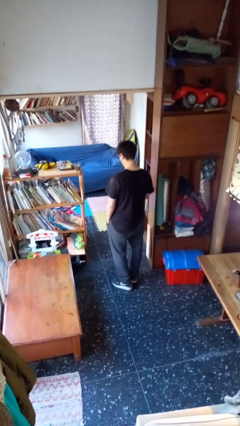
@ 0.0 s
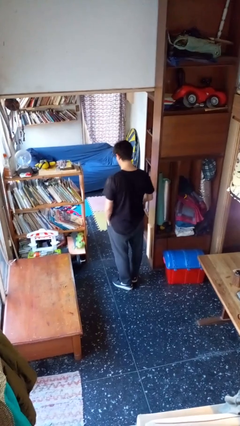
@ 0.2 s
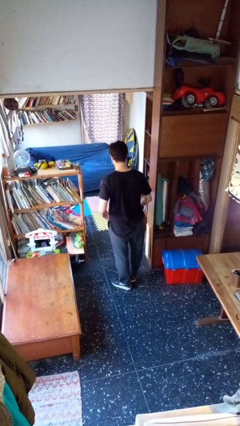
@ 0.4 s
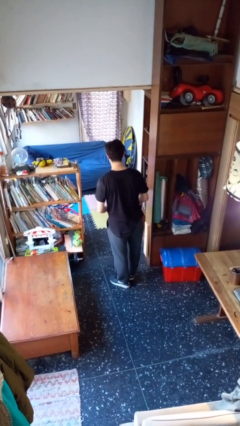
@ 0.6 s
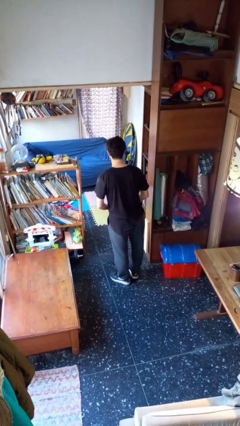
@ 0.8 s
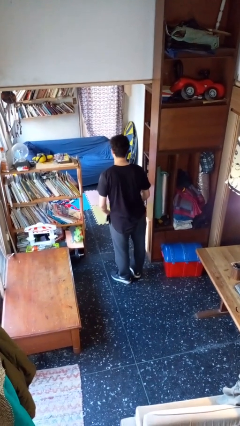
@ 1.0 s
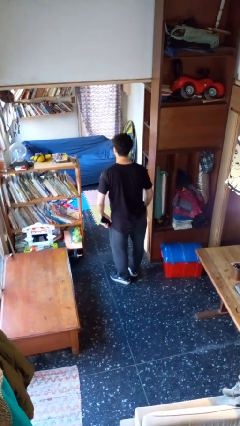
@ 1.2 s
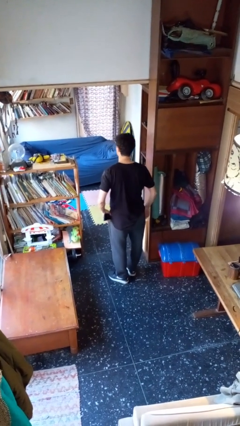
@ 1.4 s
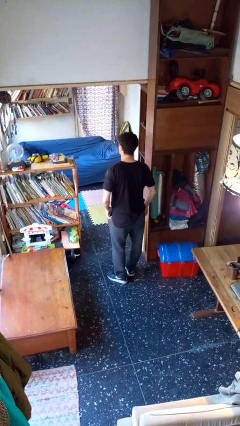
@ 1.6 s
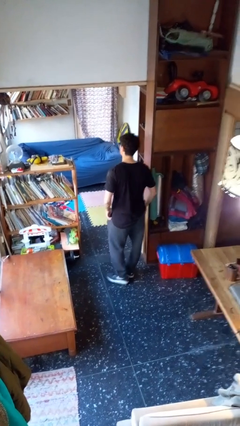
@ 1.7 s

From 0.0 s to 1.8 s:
person puts phone into pocket

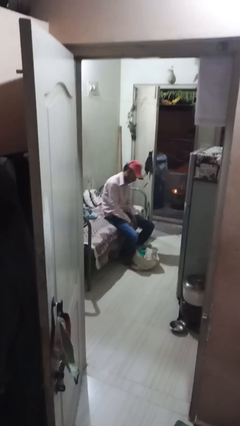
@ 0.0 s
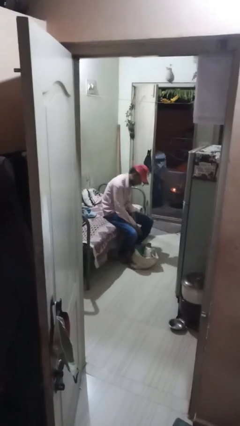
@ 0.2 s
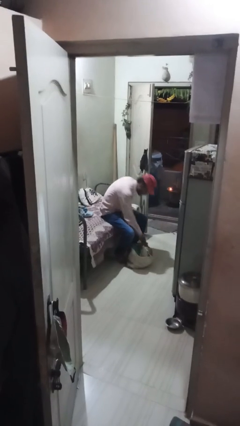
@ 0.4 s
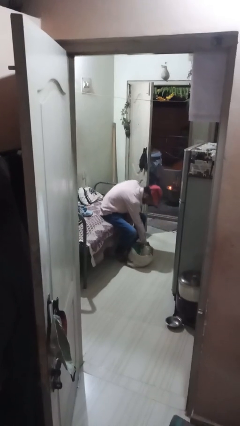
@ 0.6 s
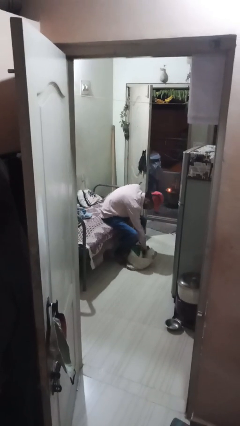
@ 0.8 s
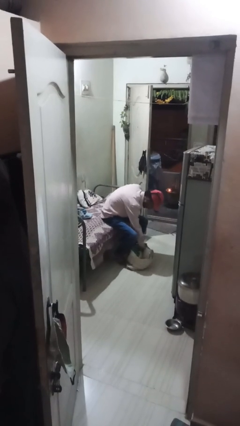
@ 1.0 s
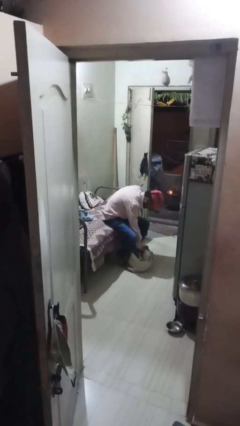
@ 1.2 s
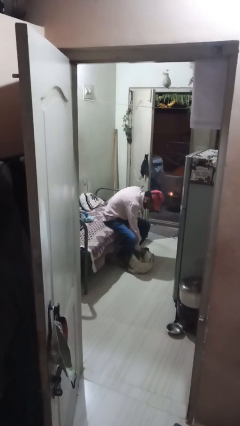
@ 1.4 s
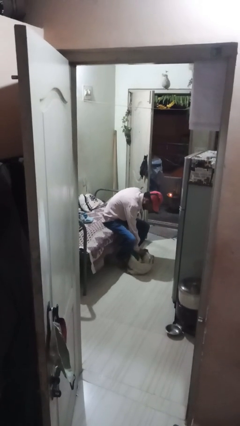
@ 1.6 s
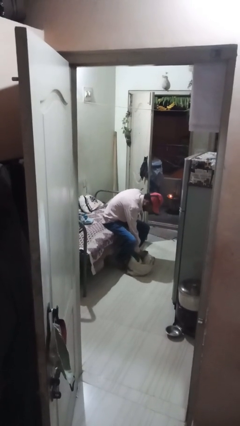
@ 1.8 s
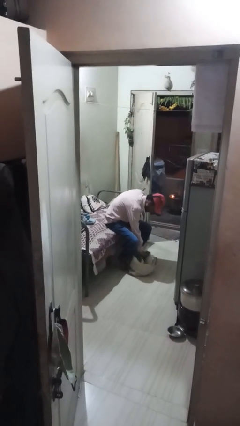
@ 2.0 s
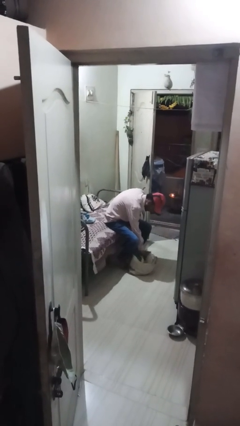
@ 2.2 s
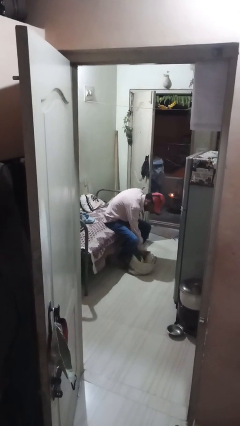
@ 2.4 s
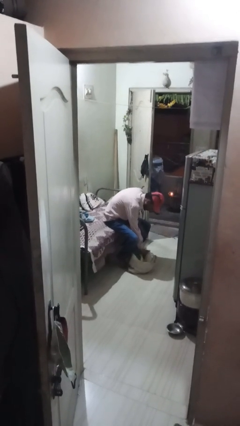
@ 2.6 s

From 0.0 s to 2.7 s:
person searches in bag

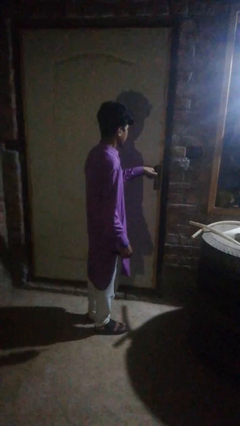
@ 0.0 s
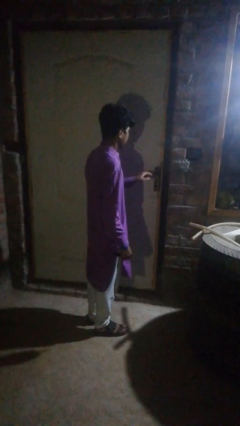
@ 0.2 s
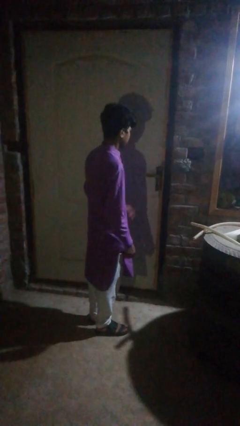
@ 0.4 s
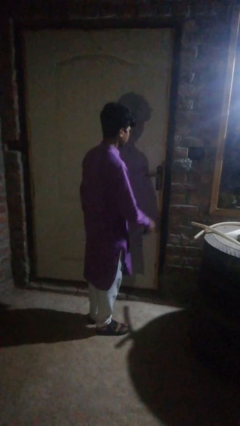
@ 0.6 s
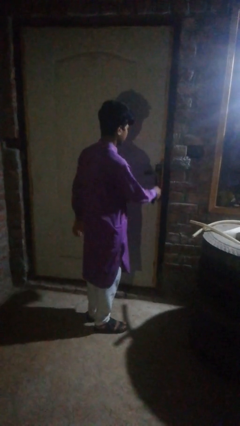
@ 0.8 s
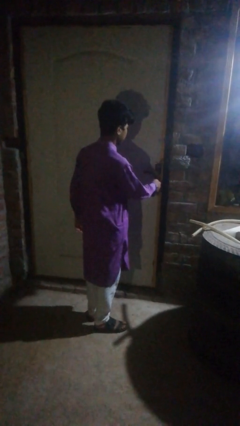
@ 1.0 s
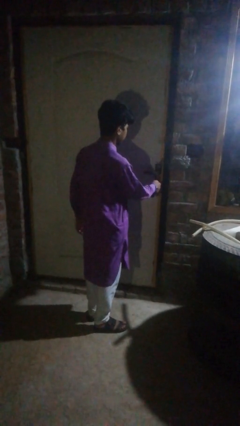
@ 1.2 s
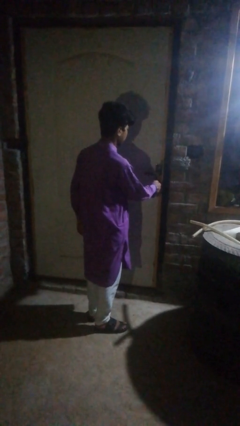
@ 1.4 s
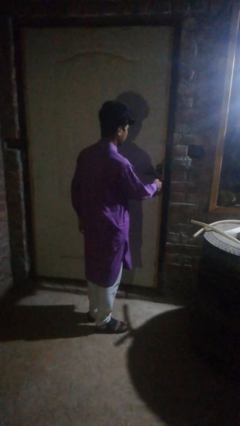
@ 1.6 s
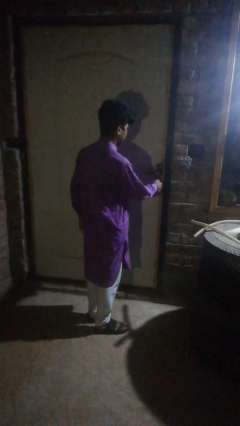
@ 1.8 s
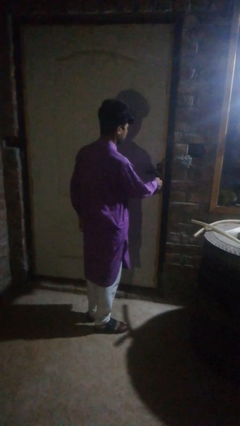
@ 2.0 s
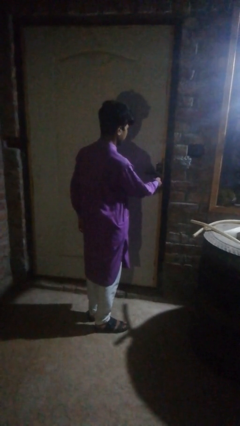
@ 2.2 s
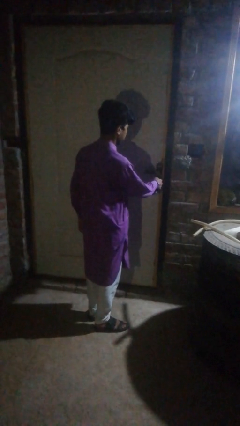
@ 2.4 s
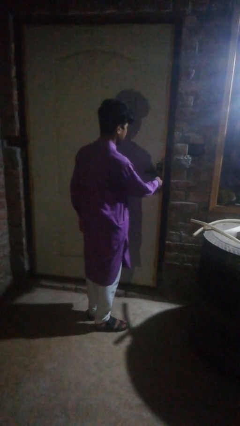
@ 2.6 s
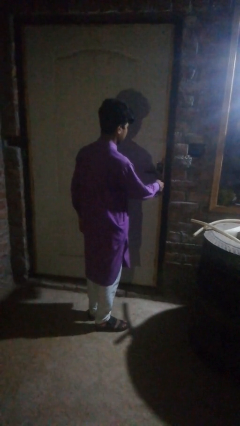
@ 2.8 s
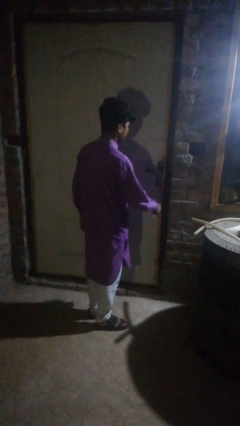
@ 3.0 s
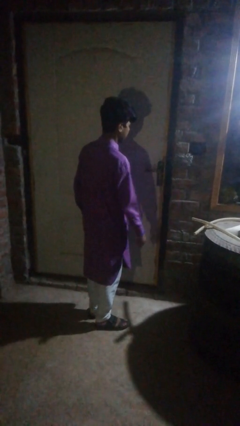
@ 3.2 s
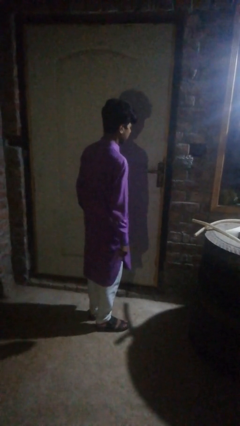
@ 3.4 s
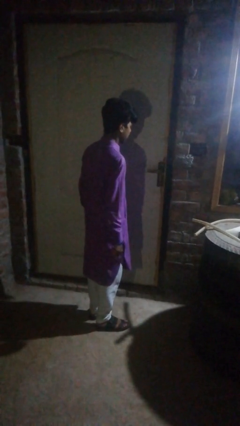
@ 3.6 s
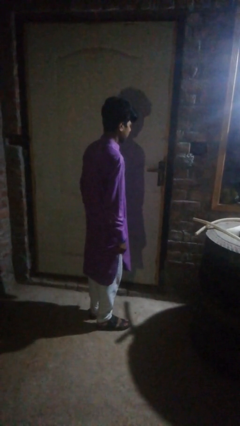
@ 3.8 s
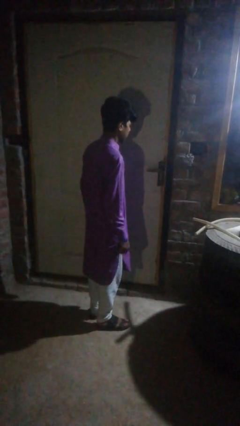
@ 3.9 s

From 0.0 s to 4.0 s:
person locks door with keys

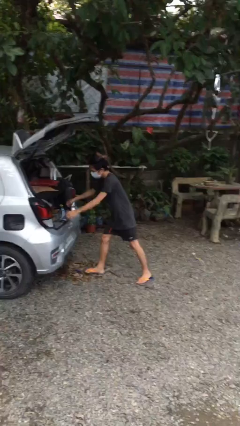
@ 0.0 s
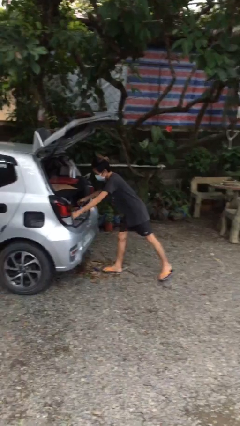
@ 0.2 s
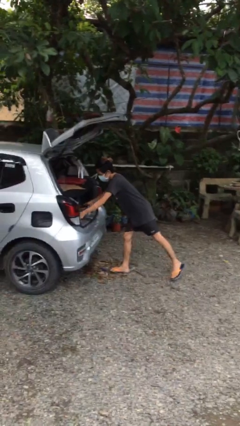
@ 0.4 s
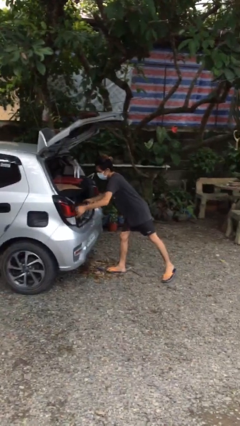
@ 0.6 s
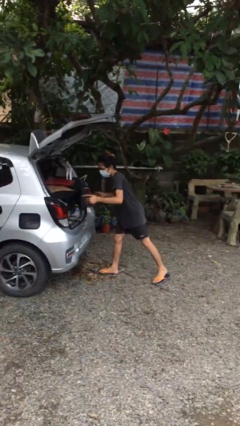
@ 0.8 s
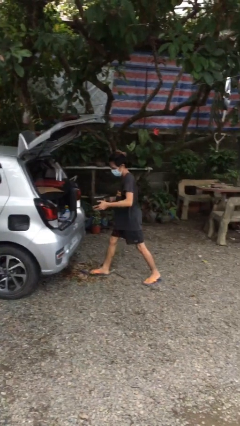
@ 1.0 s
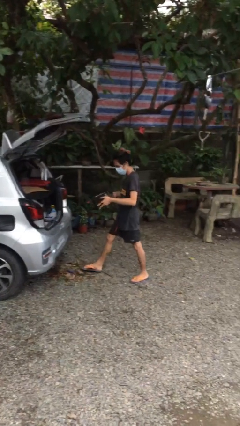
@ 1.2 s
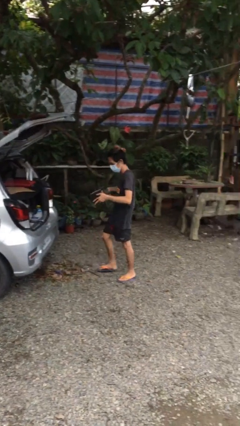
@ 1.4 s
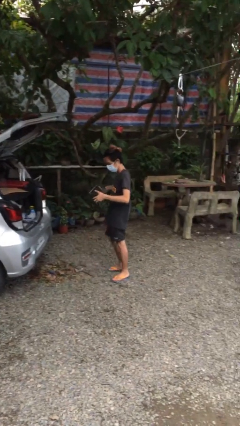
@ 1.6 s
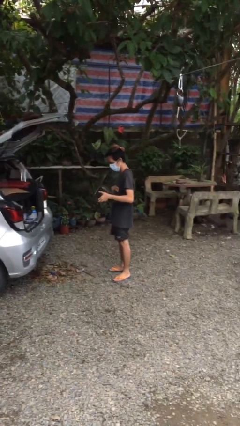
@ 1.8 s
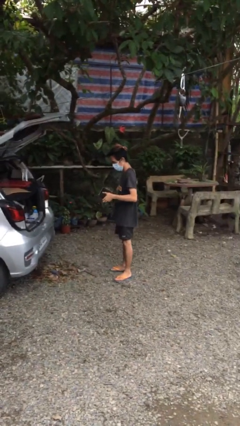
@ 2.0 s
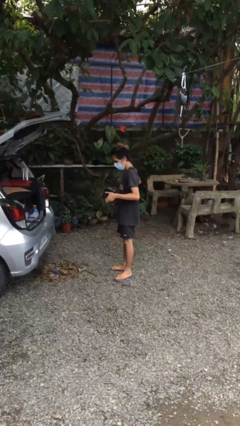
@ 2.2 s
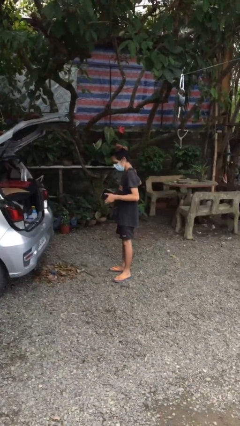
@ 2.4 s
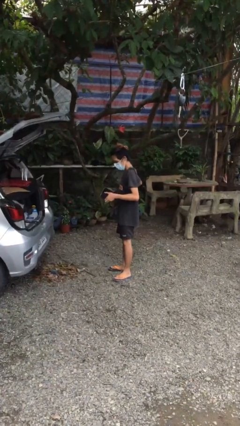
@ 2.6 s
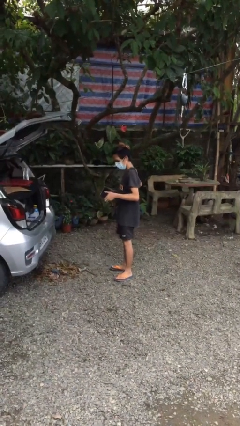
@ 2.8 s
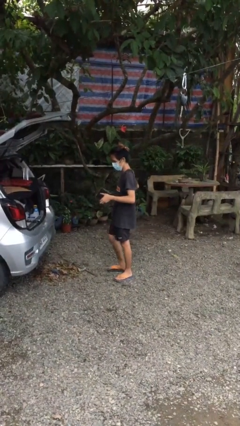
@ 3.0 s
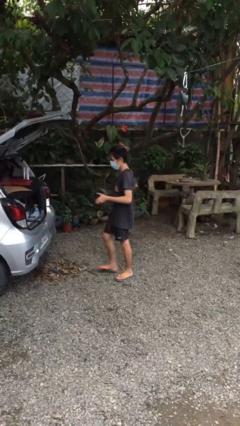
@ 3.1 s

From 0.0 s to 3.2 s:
person unloads car

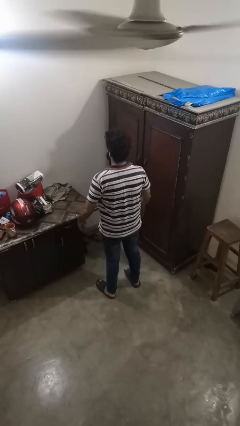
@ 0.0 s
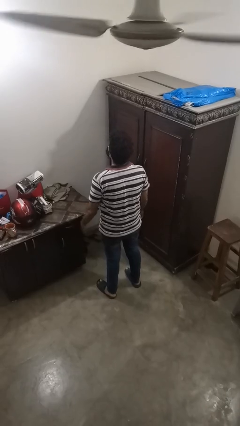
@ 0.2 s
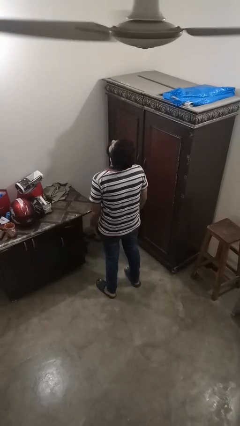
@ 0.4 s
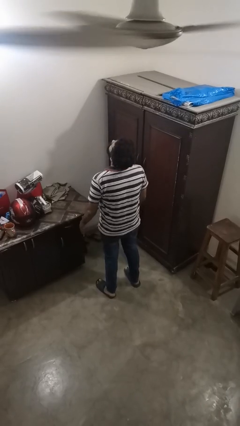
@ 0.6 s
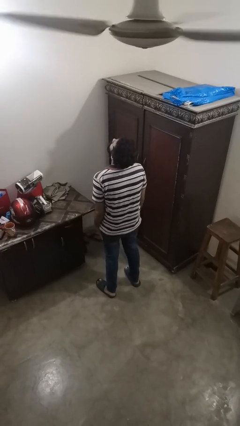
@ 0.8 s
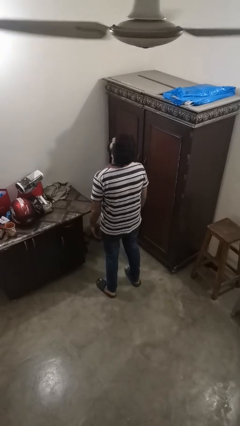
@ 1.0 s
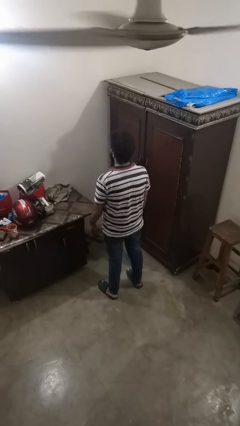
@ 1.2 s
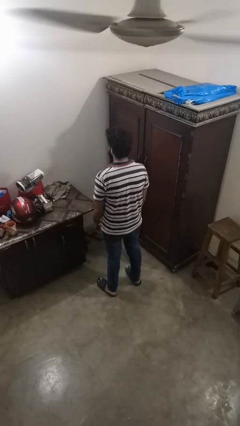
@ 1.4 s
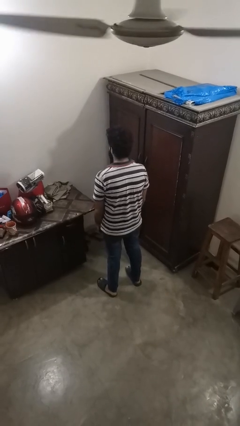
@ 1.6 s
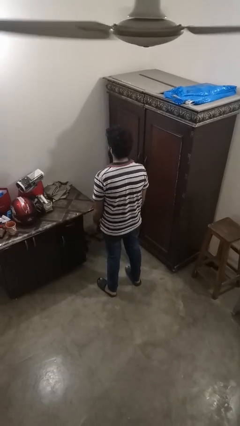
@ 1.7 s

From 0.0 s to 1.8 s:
person slaps hands on thighs

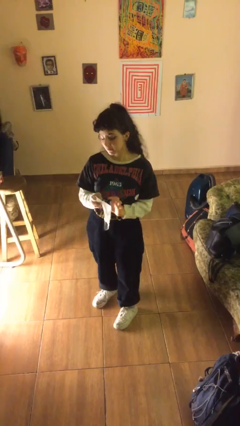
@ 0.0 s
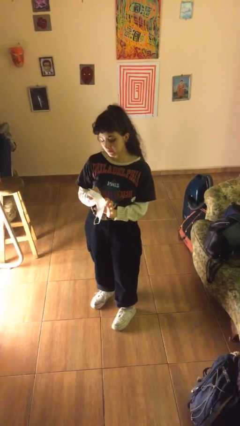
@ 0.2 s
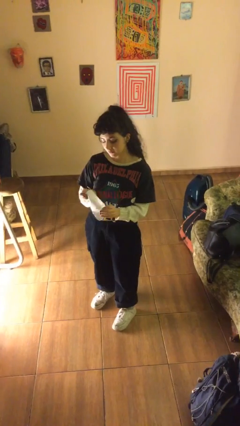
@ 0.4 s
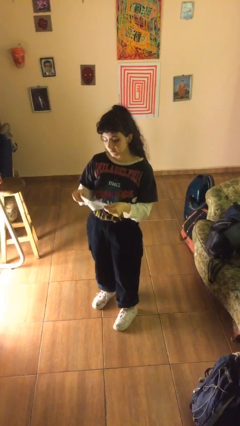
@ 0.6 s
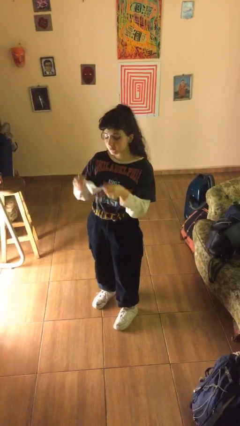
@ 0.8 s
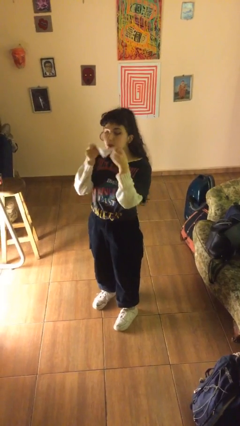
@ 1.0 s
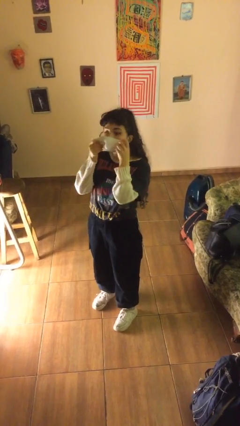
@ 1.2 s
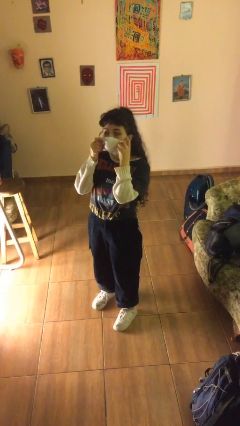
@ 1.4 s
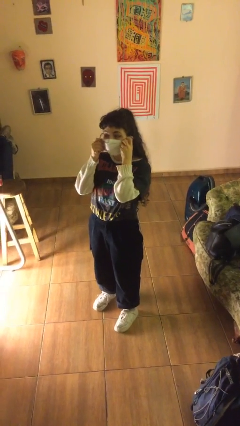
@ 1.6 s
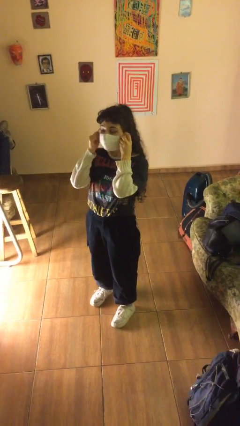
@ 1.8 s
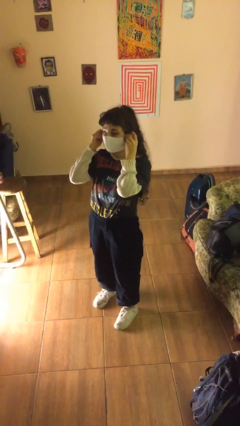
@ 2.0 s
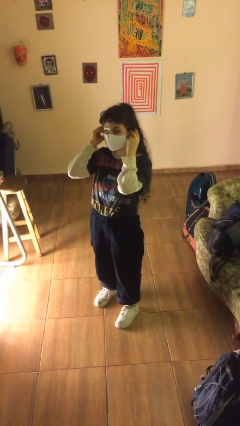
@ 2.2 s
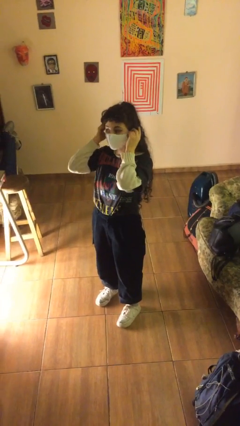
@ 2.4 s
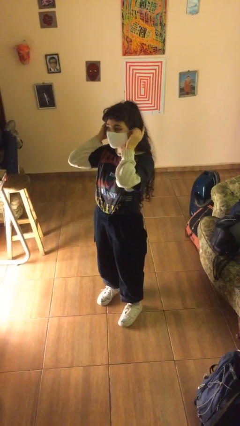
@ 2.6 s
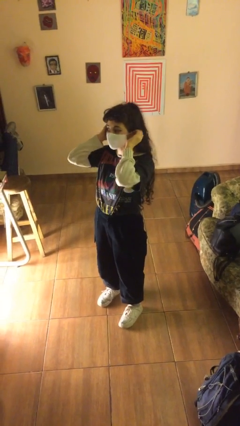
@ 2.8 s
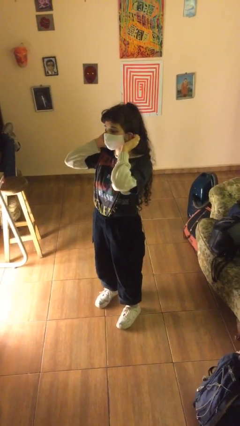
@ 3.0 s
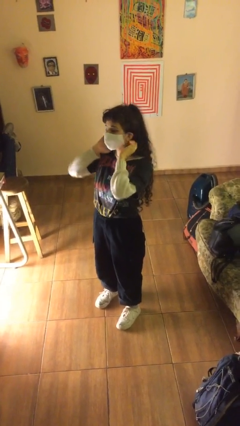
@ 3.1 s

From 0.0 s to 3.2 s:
person puts on facemask

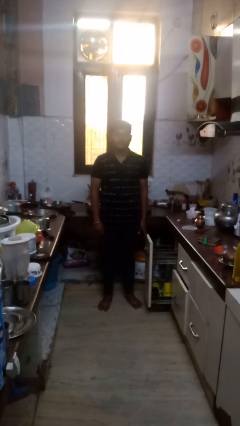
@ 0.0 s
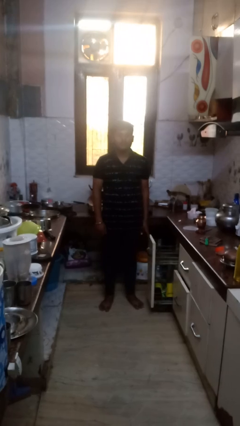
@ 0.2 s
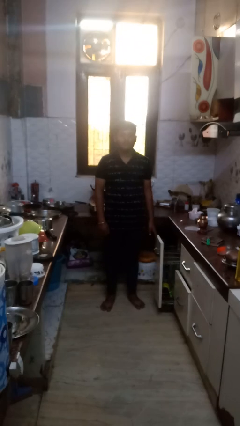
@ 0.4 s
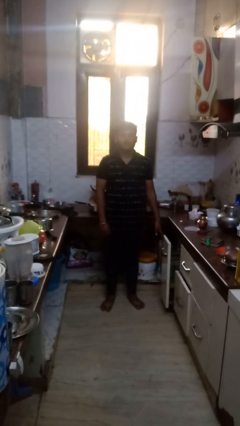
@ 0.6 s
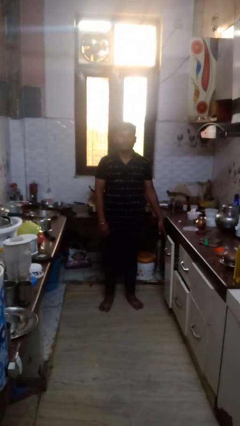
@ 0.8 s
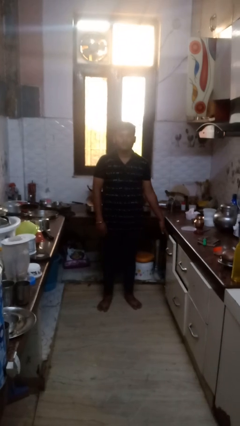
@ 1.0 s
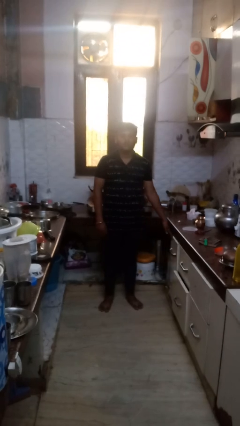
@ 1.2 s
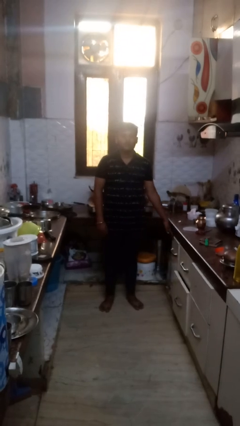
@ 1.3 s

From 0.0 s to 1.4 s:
person closes dishwasher
